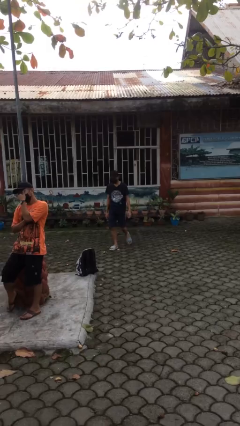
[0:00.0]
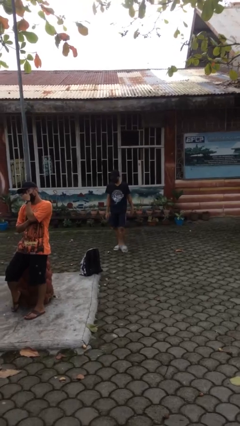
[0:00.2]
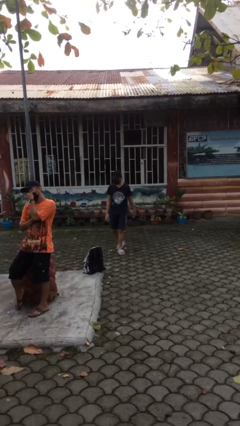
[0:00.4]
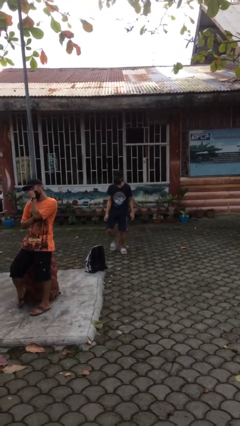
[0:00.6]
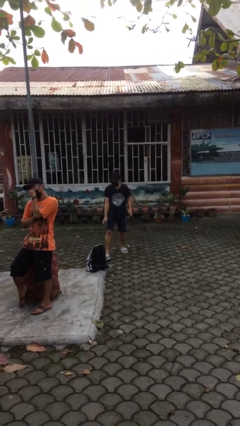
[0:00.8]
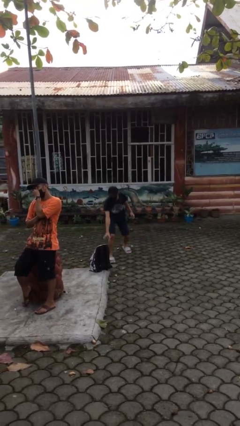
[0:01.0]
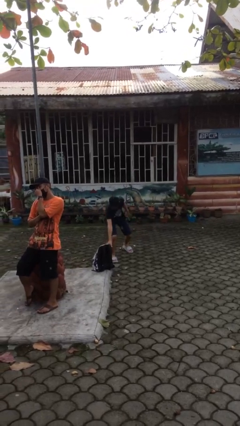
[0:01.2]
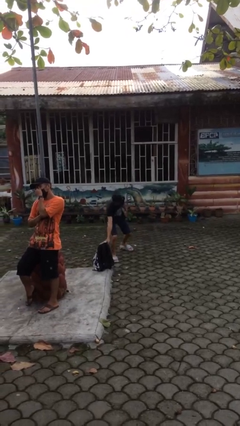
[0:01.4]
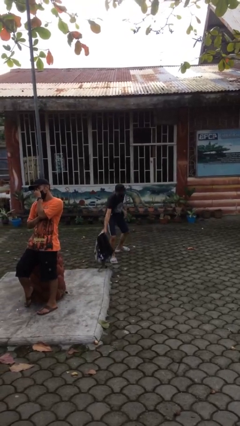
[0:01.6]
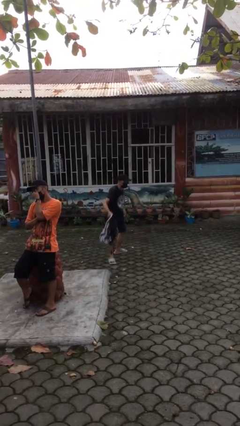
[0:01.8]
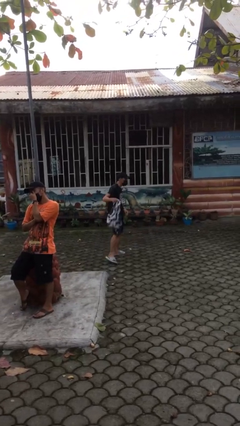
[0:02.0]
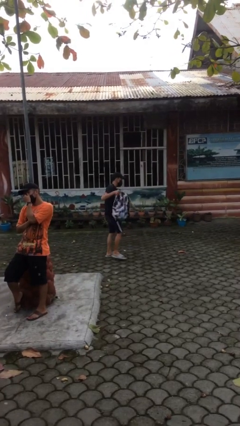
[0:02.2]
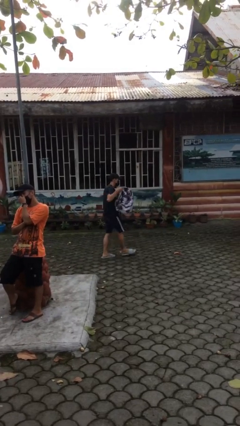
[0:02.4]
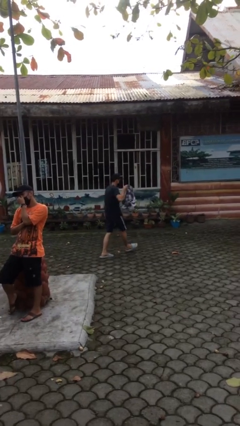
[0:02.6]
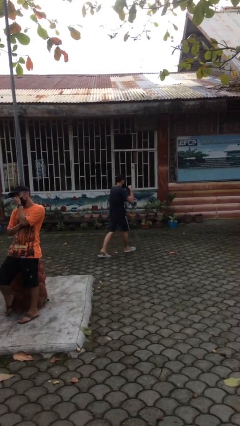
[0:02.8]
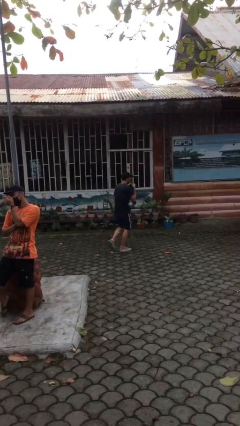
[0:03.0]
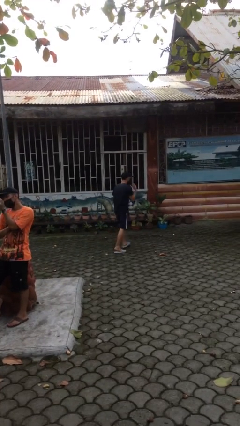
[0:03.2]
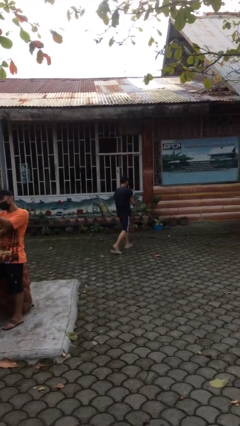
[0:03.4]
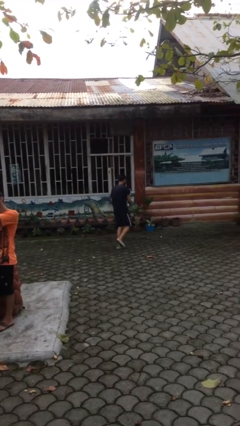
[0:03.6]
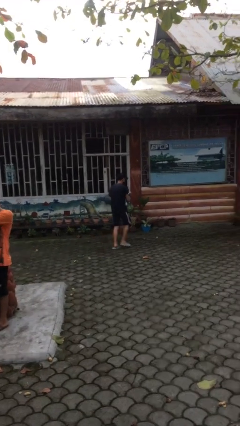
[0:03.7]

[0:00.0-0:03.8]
person steals object from person

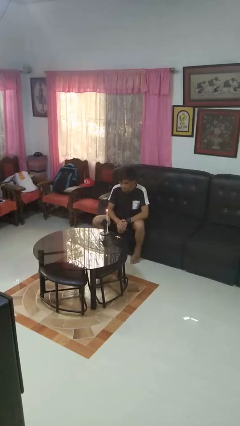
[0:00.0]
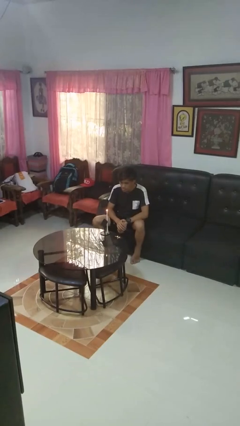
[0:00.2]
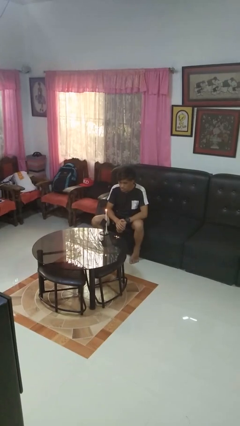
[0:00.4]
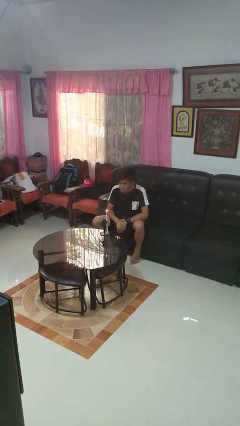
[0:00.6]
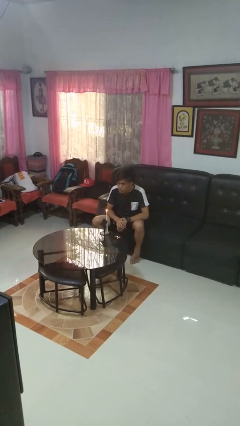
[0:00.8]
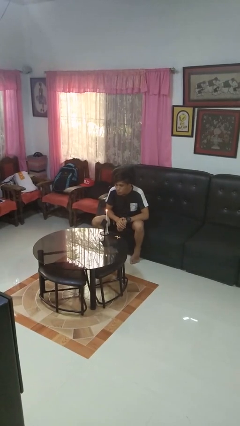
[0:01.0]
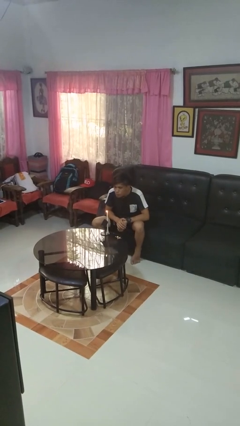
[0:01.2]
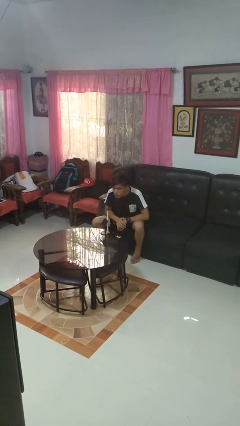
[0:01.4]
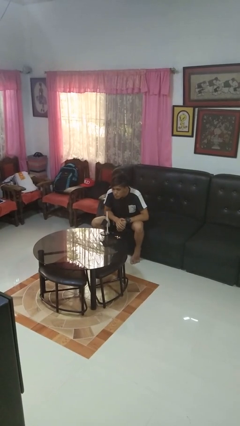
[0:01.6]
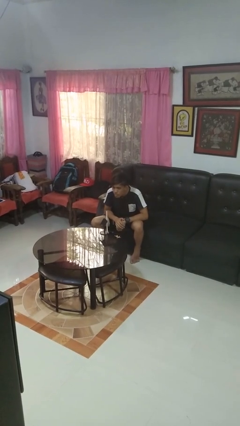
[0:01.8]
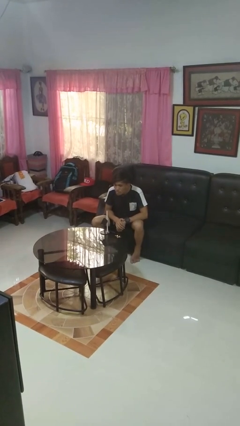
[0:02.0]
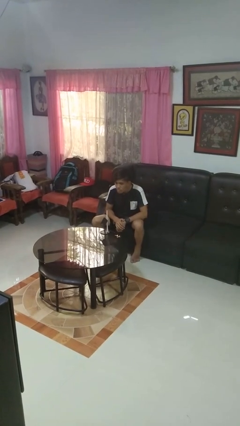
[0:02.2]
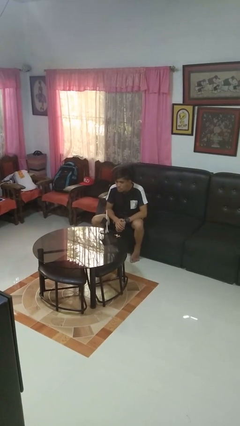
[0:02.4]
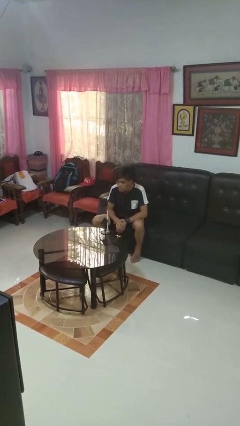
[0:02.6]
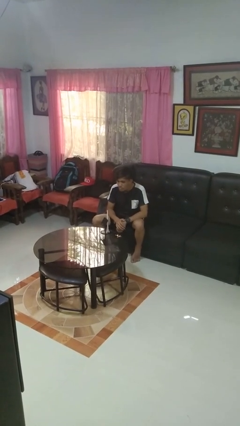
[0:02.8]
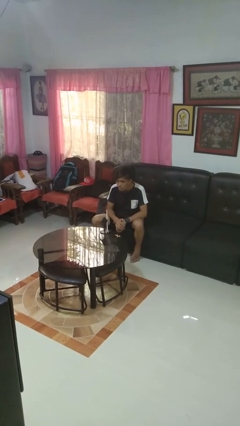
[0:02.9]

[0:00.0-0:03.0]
person extinguishes candle

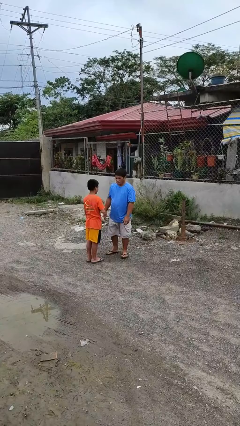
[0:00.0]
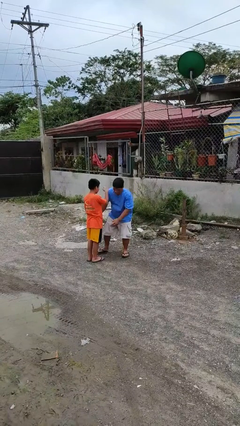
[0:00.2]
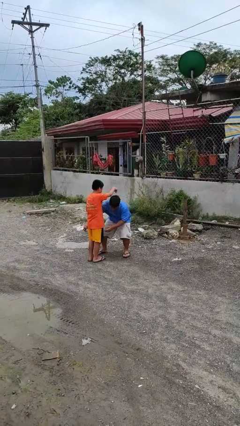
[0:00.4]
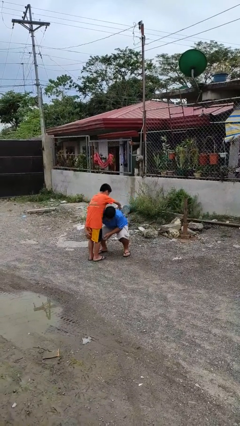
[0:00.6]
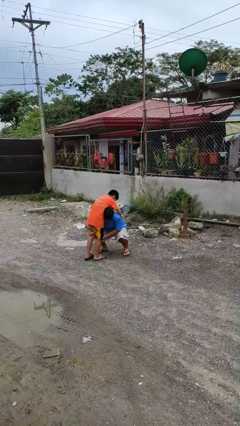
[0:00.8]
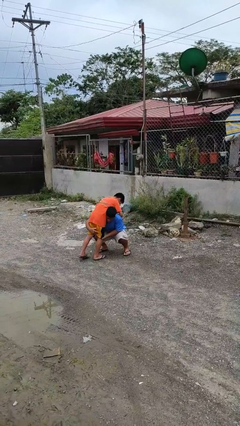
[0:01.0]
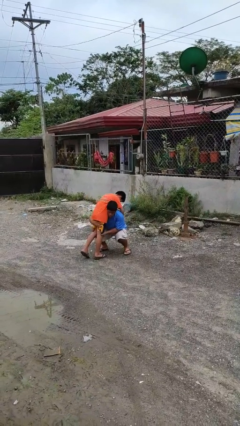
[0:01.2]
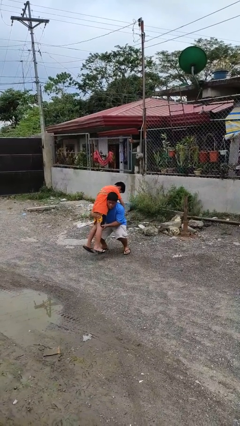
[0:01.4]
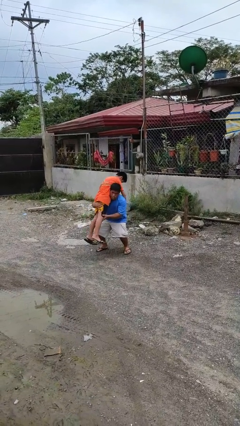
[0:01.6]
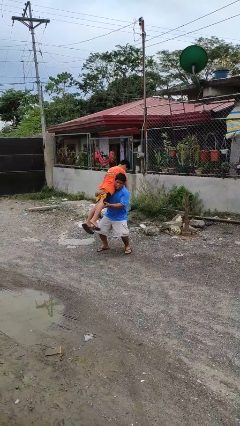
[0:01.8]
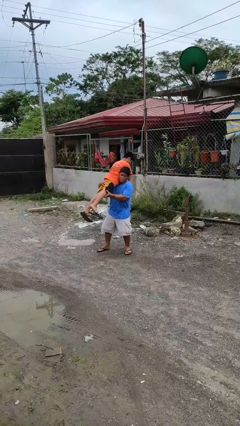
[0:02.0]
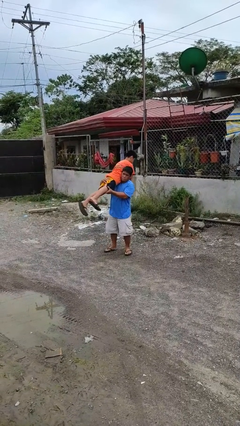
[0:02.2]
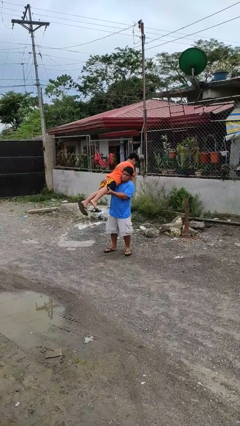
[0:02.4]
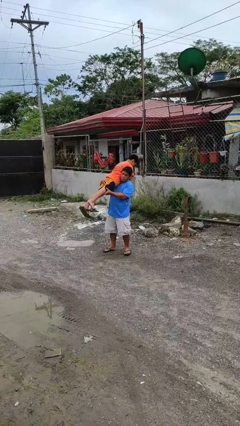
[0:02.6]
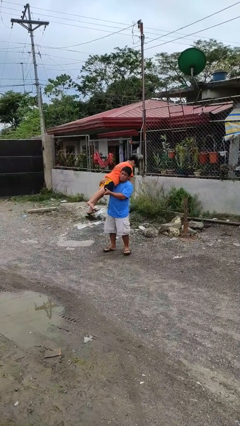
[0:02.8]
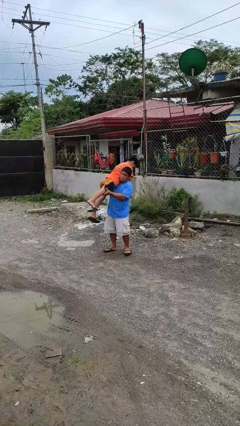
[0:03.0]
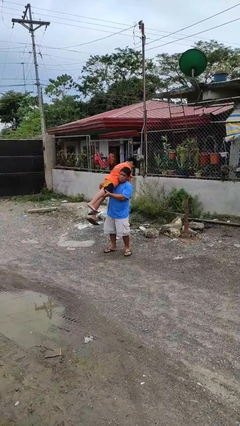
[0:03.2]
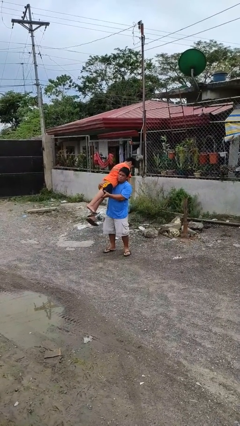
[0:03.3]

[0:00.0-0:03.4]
person carries person over shoulder

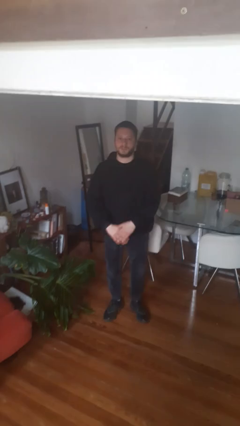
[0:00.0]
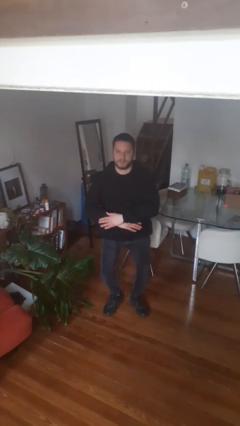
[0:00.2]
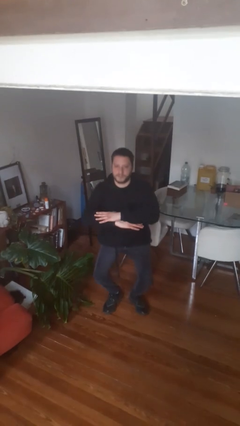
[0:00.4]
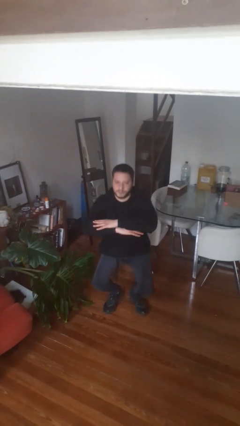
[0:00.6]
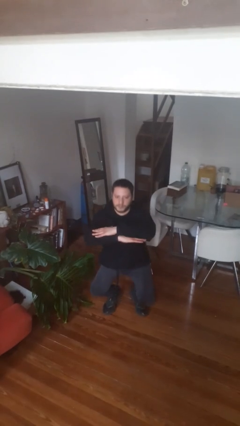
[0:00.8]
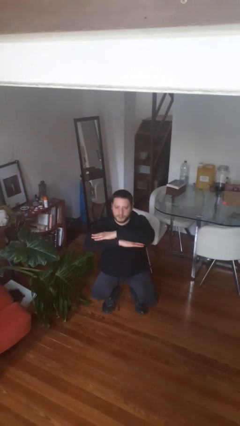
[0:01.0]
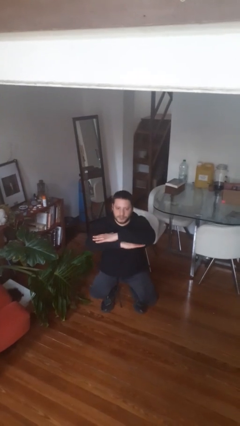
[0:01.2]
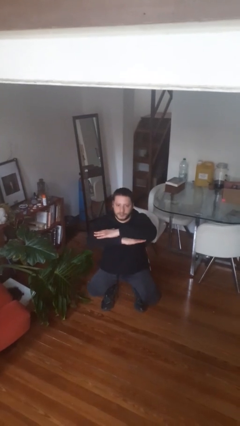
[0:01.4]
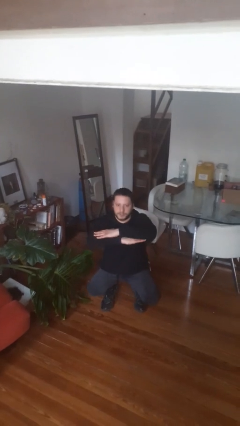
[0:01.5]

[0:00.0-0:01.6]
person squats

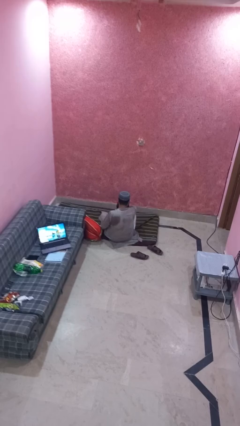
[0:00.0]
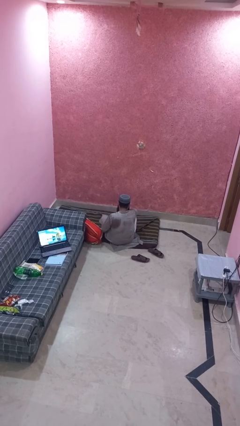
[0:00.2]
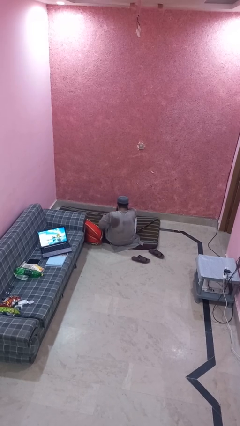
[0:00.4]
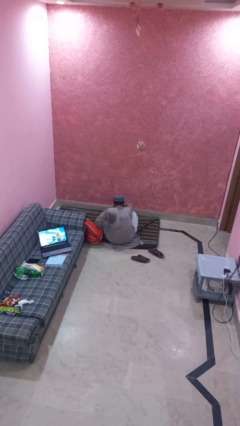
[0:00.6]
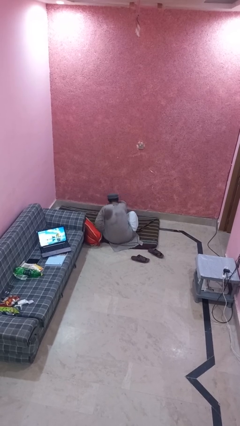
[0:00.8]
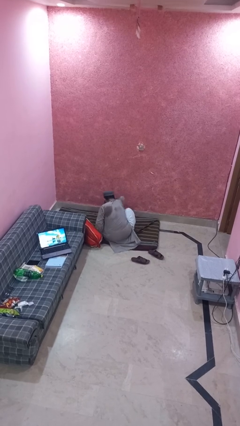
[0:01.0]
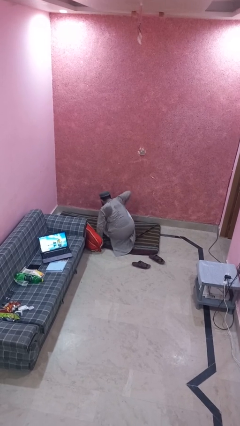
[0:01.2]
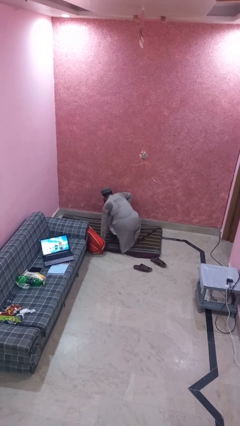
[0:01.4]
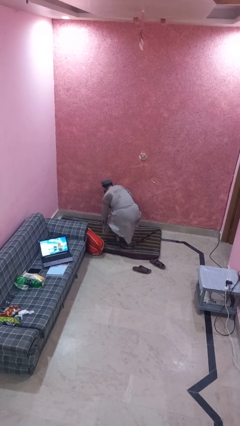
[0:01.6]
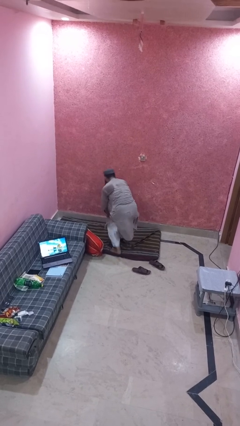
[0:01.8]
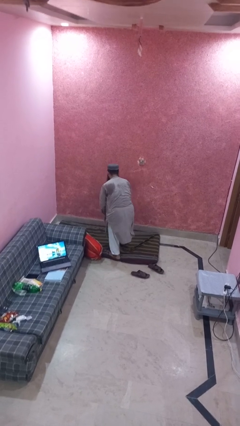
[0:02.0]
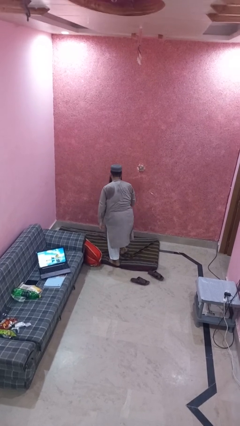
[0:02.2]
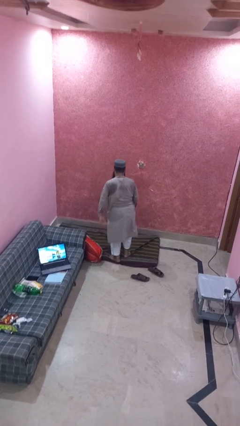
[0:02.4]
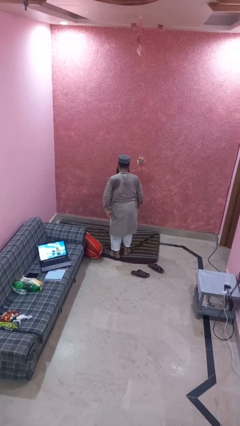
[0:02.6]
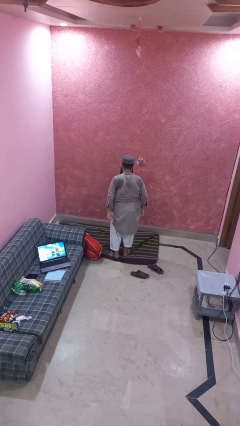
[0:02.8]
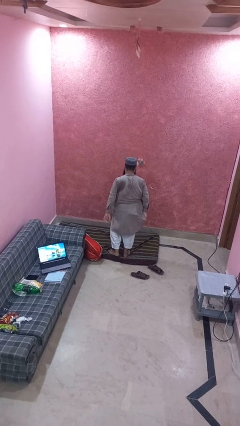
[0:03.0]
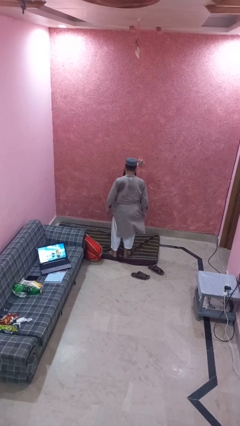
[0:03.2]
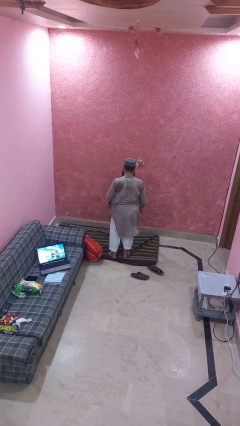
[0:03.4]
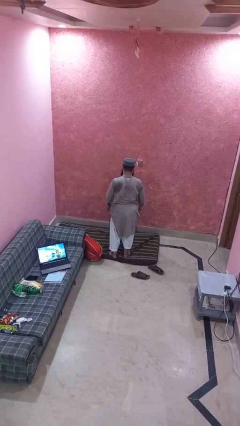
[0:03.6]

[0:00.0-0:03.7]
person stands up from floor

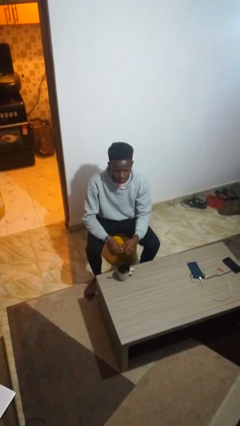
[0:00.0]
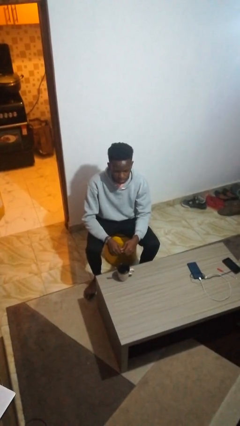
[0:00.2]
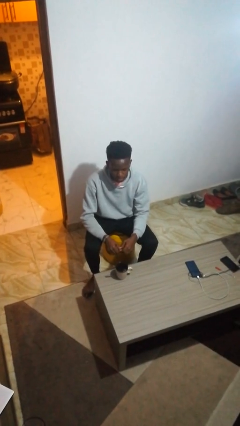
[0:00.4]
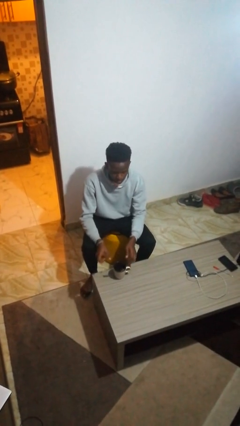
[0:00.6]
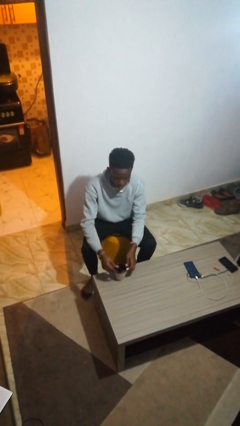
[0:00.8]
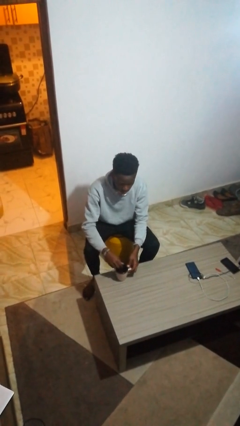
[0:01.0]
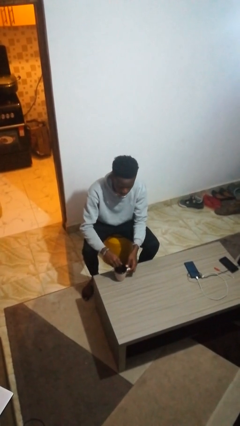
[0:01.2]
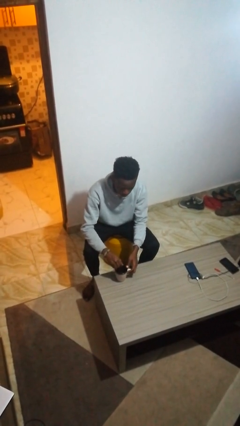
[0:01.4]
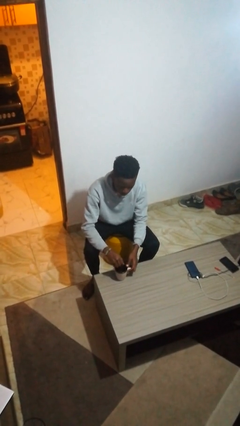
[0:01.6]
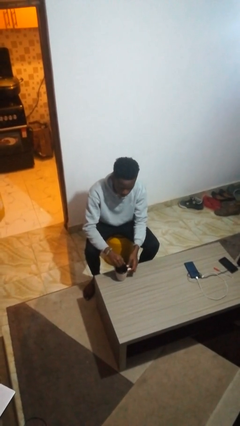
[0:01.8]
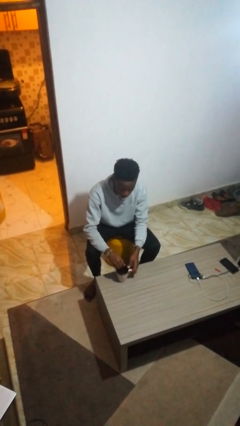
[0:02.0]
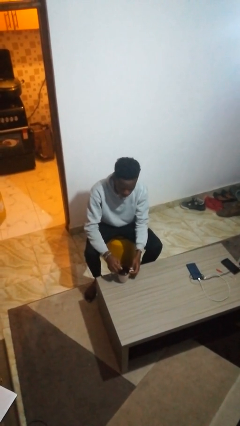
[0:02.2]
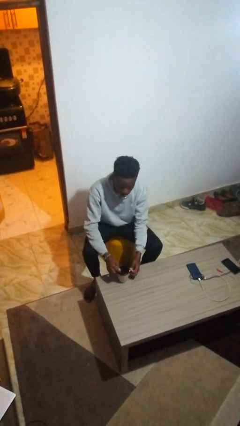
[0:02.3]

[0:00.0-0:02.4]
person stirs mug
